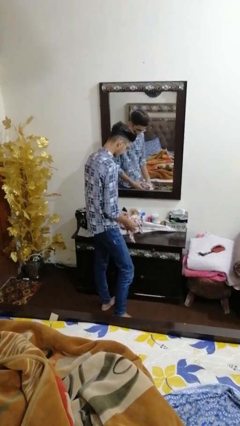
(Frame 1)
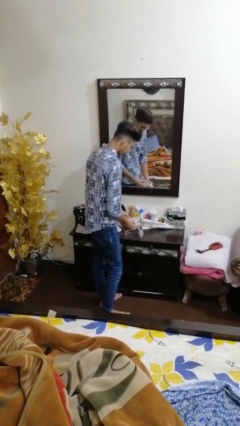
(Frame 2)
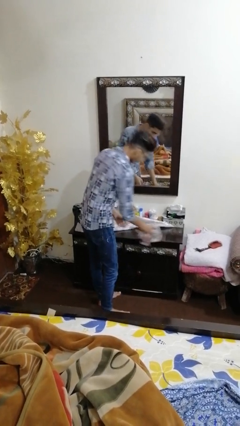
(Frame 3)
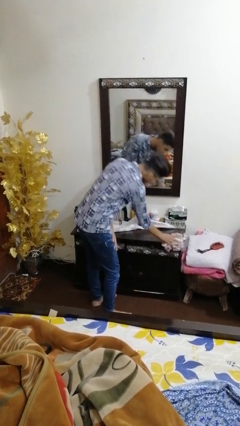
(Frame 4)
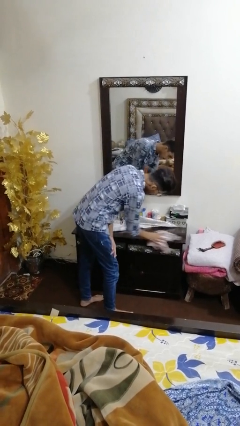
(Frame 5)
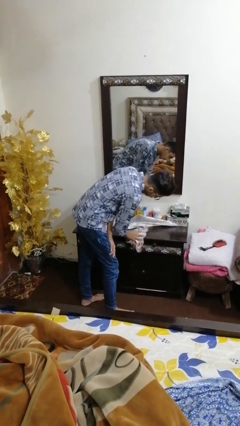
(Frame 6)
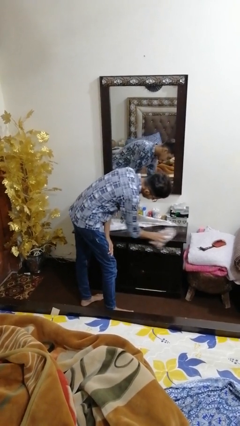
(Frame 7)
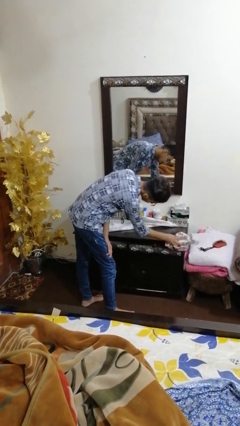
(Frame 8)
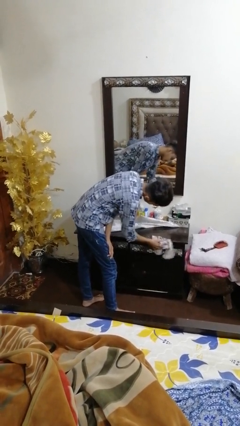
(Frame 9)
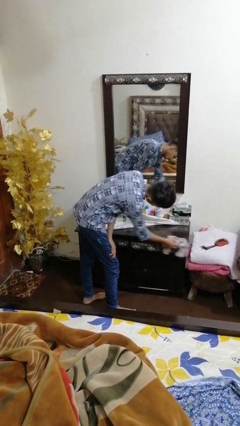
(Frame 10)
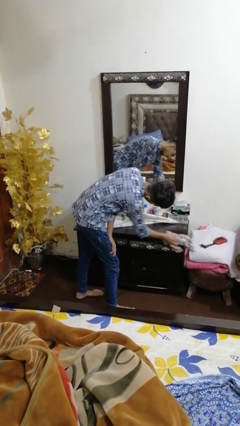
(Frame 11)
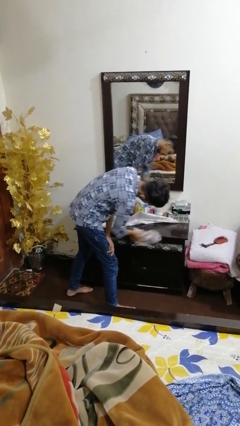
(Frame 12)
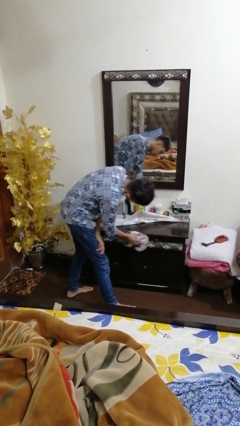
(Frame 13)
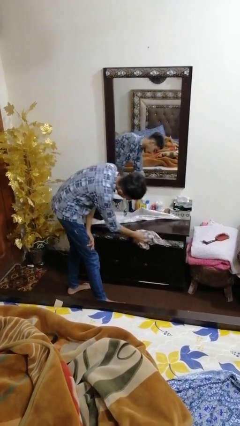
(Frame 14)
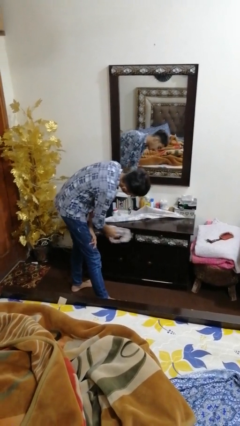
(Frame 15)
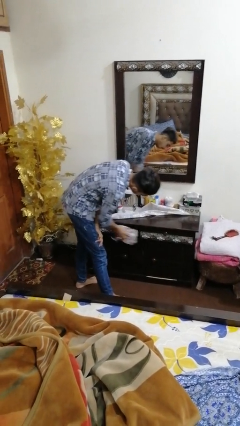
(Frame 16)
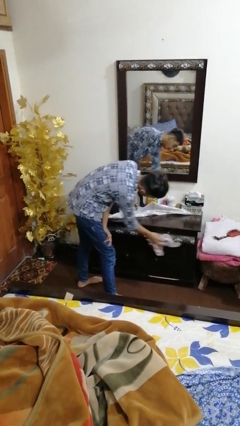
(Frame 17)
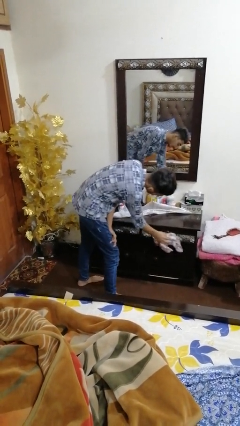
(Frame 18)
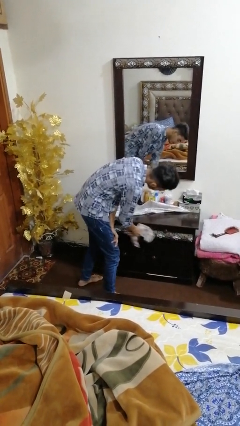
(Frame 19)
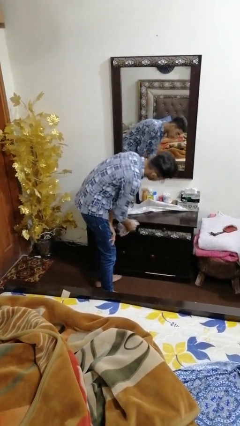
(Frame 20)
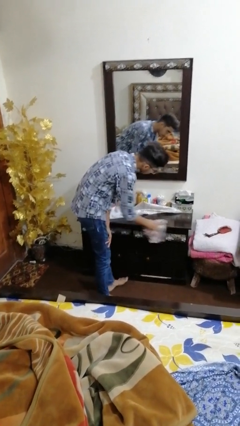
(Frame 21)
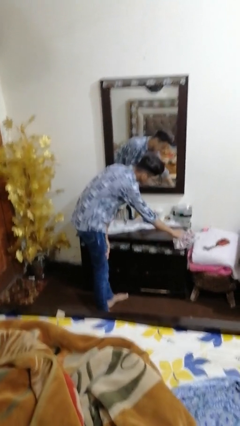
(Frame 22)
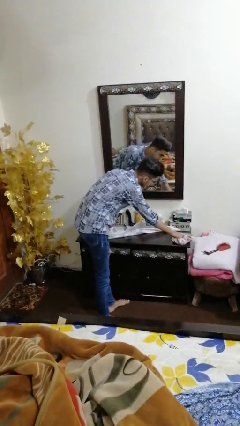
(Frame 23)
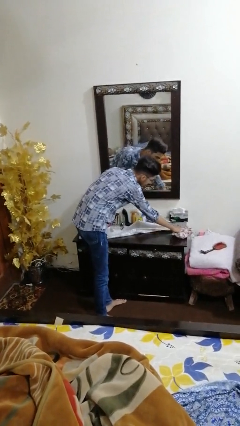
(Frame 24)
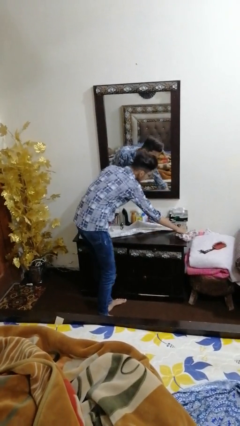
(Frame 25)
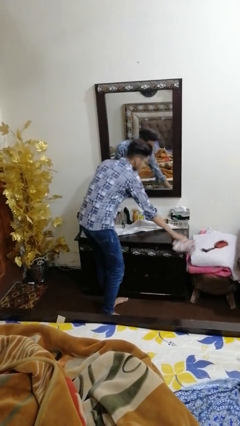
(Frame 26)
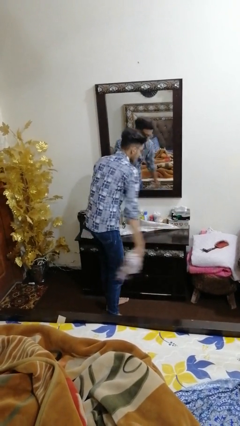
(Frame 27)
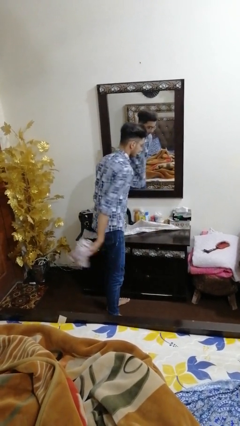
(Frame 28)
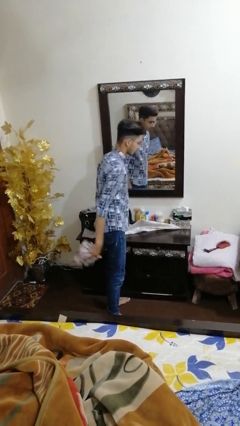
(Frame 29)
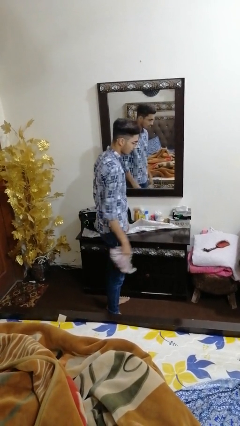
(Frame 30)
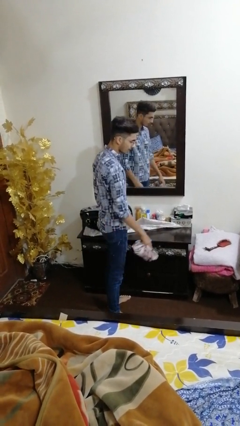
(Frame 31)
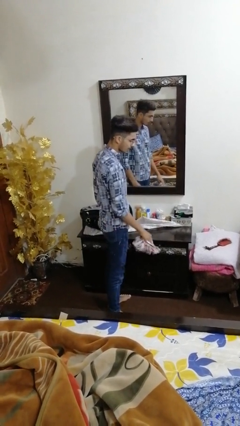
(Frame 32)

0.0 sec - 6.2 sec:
person cleans table with rag

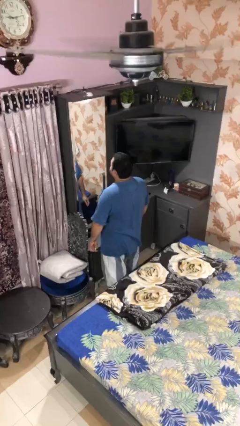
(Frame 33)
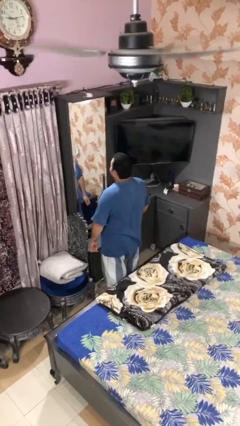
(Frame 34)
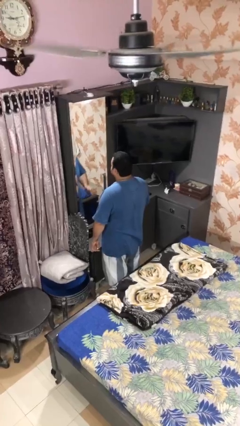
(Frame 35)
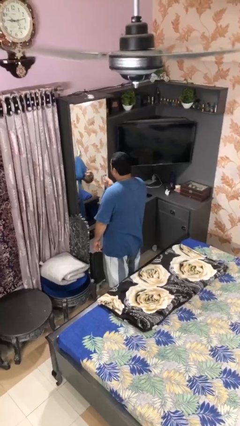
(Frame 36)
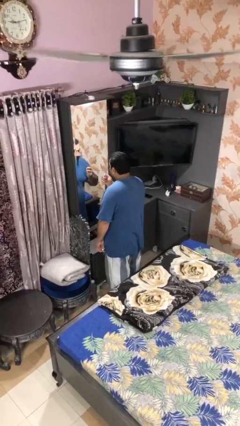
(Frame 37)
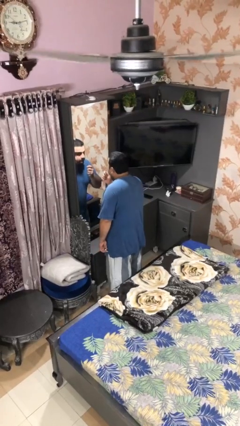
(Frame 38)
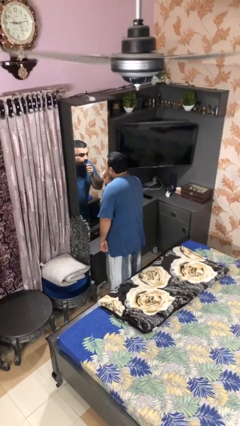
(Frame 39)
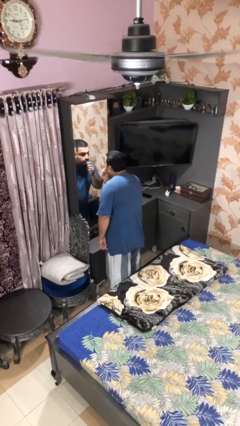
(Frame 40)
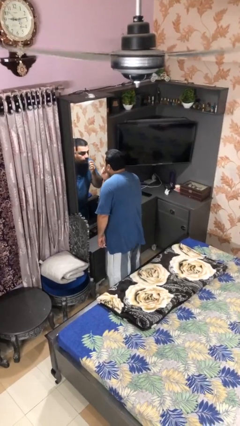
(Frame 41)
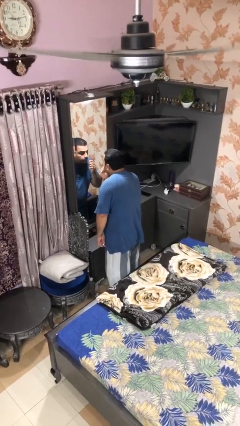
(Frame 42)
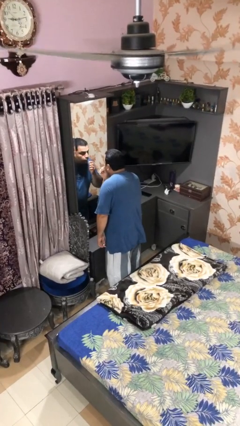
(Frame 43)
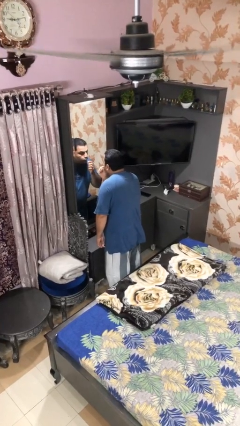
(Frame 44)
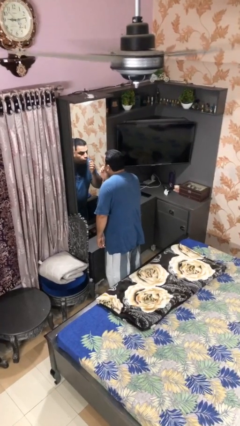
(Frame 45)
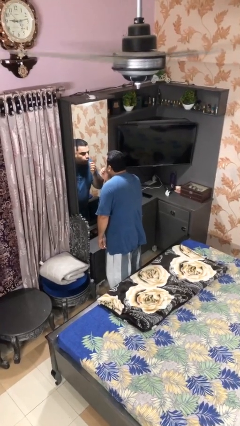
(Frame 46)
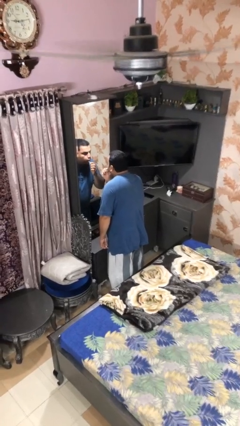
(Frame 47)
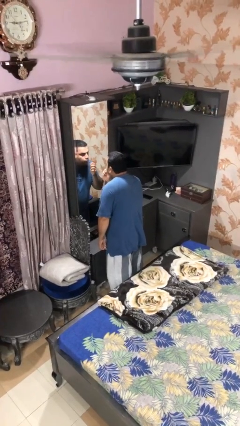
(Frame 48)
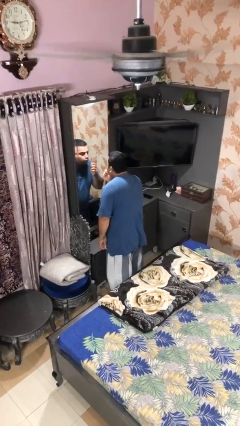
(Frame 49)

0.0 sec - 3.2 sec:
person applies lip makeup

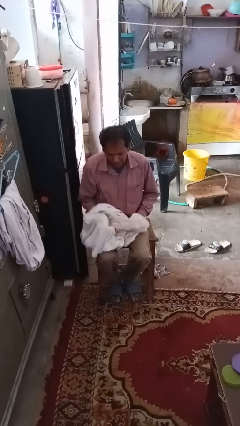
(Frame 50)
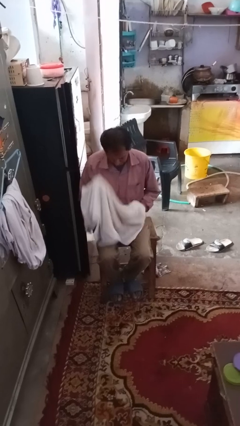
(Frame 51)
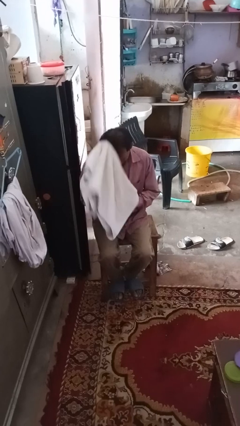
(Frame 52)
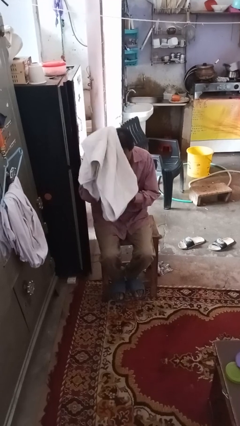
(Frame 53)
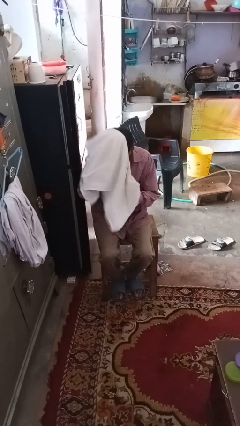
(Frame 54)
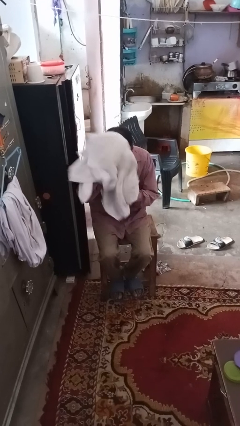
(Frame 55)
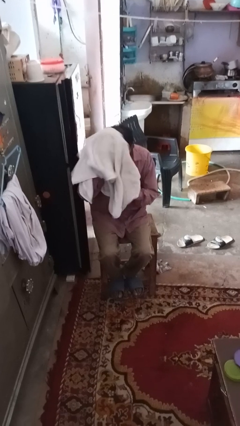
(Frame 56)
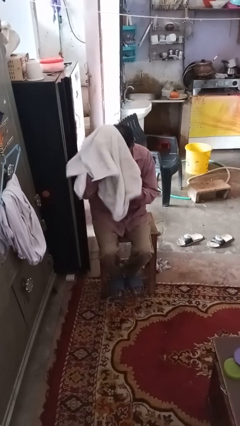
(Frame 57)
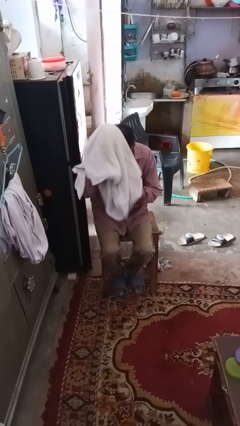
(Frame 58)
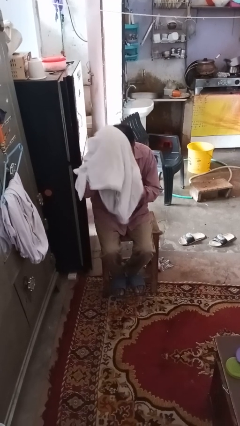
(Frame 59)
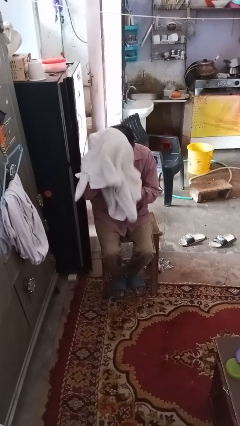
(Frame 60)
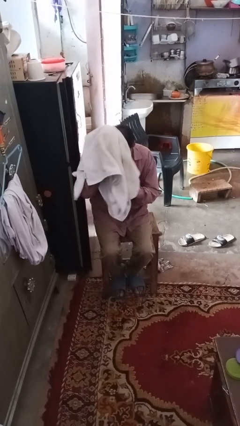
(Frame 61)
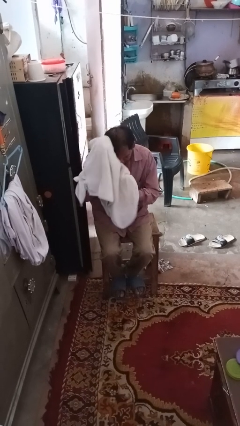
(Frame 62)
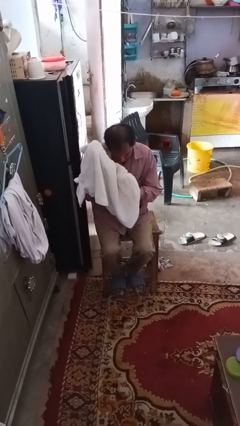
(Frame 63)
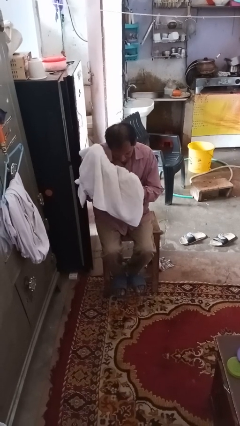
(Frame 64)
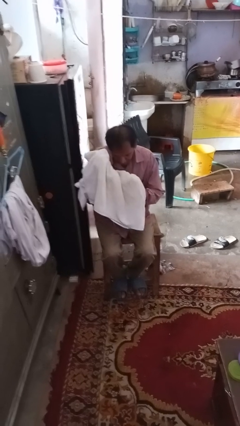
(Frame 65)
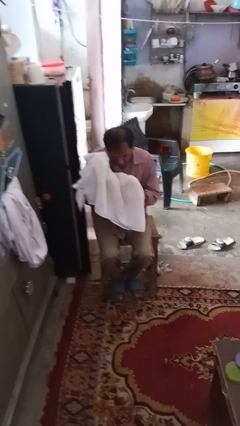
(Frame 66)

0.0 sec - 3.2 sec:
person dries hair with towel

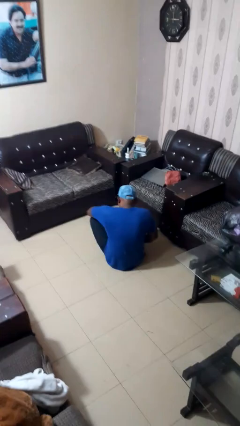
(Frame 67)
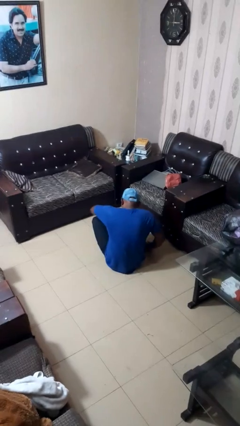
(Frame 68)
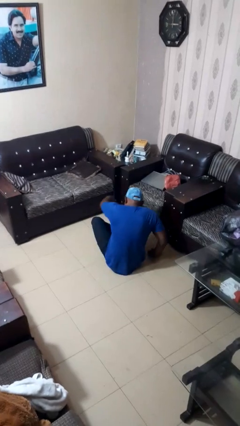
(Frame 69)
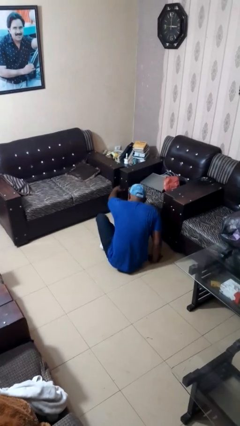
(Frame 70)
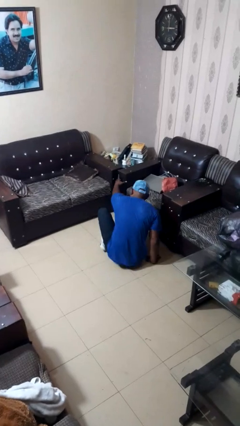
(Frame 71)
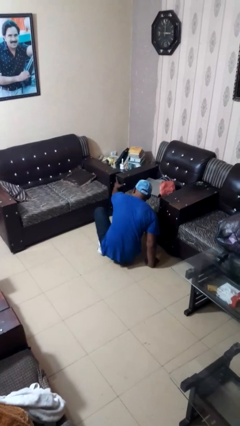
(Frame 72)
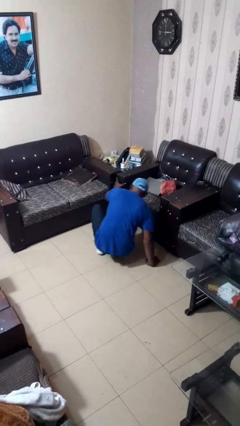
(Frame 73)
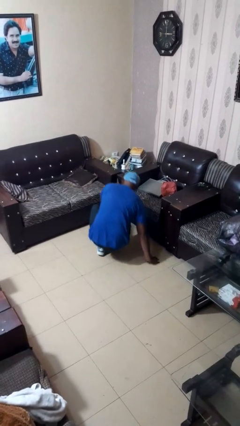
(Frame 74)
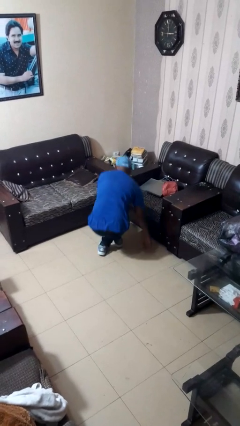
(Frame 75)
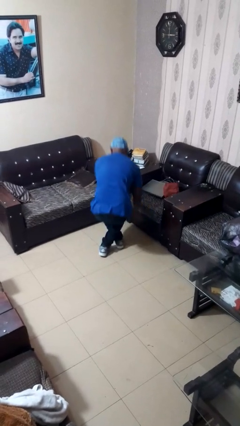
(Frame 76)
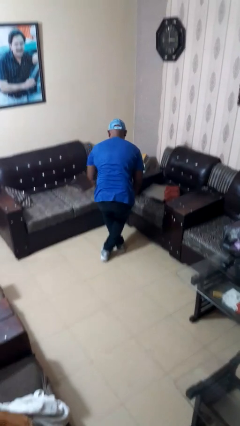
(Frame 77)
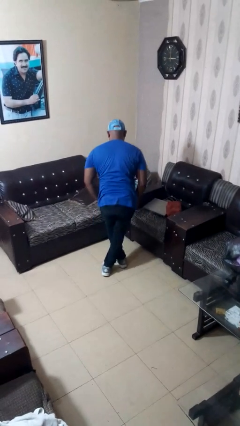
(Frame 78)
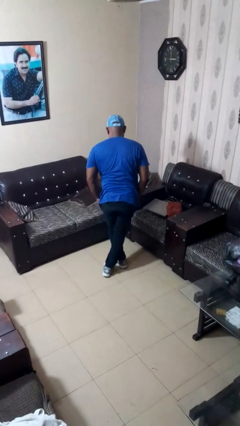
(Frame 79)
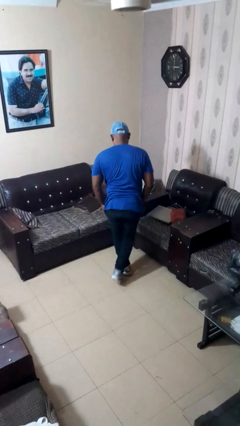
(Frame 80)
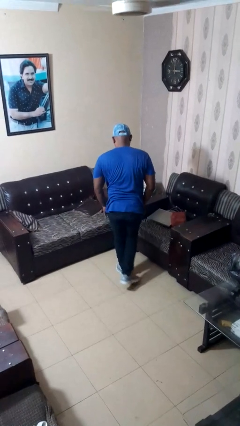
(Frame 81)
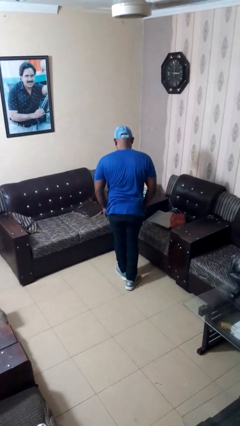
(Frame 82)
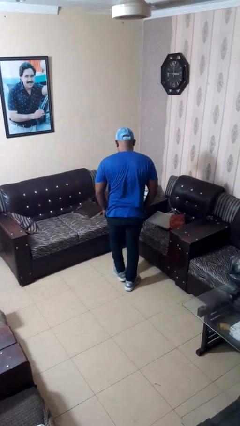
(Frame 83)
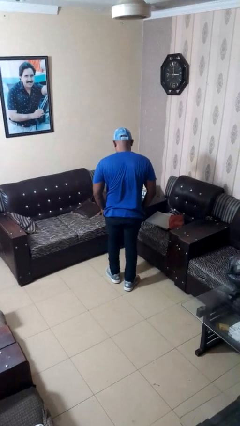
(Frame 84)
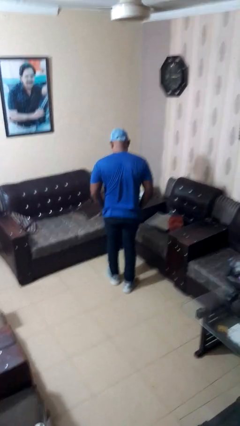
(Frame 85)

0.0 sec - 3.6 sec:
person stands up from floor

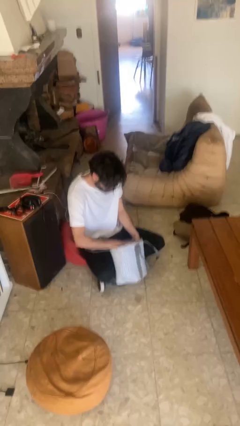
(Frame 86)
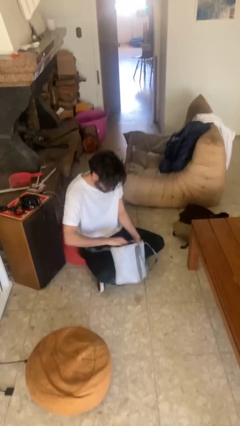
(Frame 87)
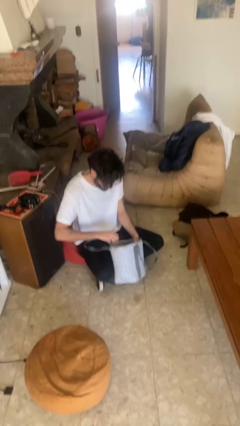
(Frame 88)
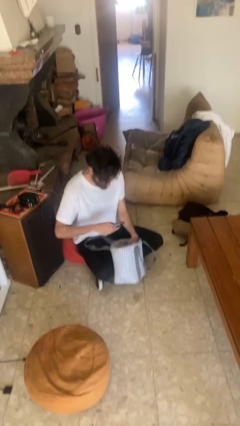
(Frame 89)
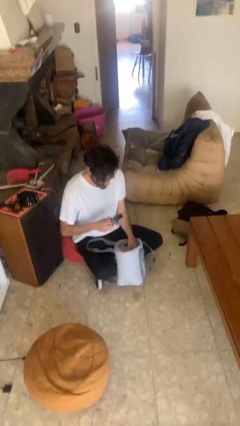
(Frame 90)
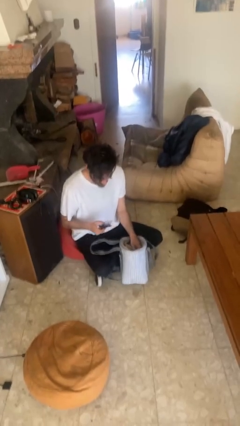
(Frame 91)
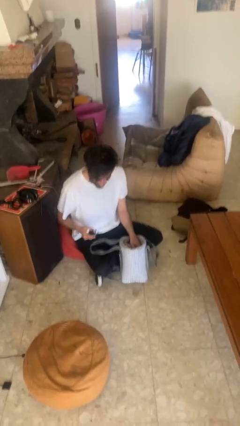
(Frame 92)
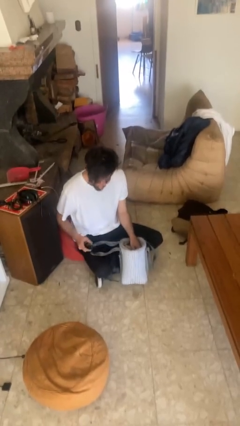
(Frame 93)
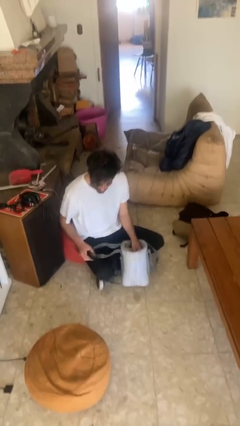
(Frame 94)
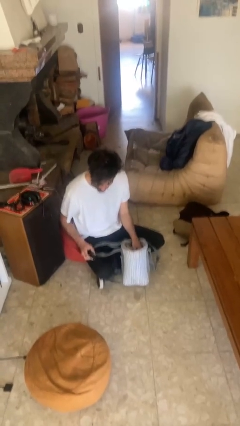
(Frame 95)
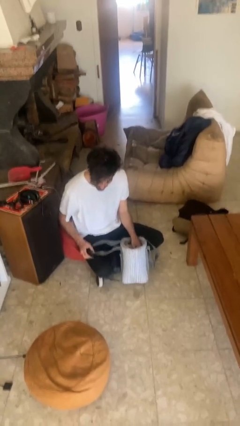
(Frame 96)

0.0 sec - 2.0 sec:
person takes object from purse
